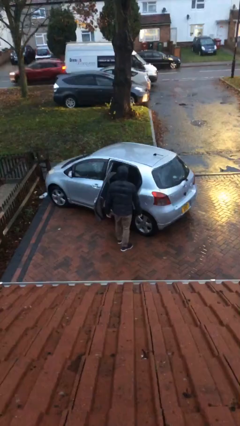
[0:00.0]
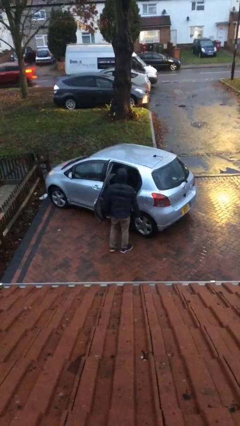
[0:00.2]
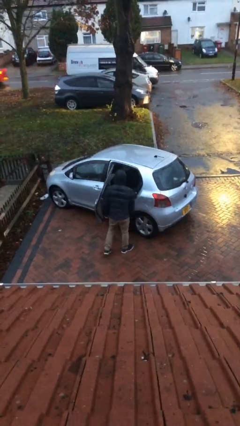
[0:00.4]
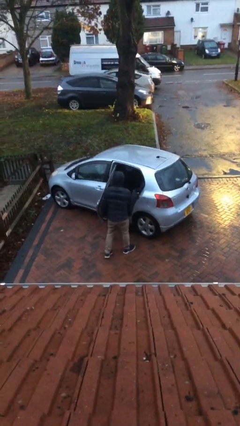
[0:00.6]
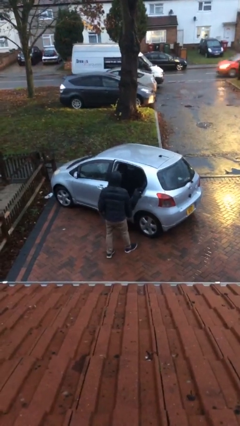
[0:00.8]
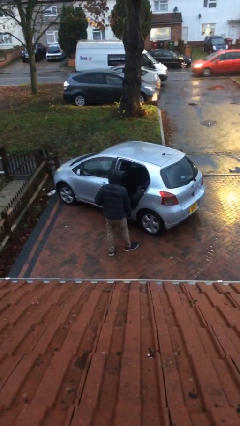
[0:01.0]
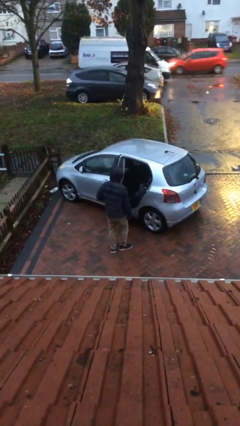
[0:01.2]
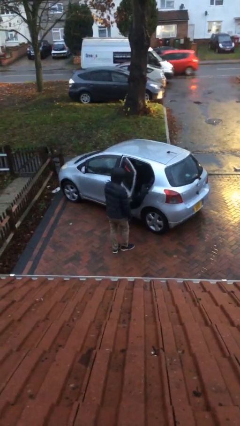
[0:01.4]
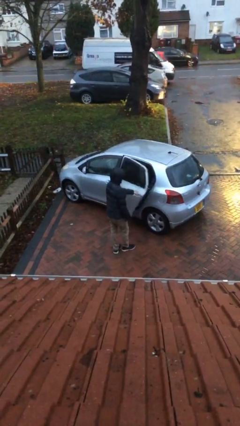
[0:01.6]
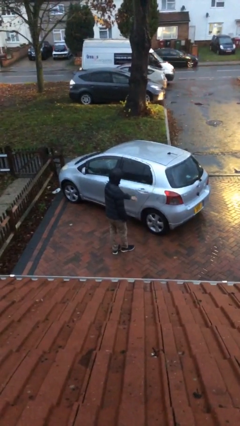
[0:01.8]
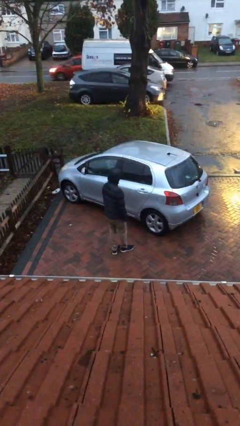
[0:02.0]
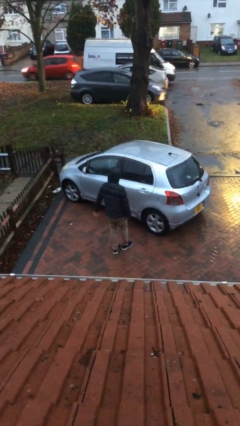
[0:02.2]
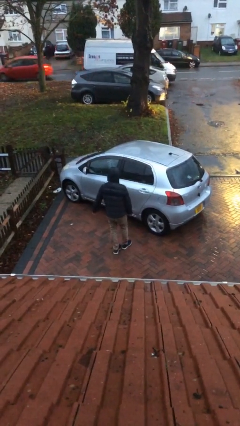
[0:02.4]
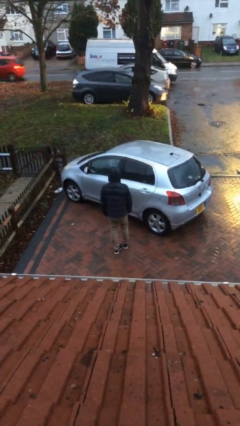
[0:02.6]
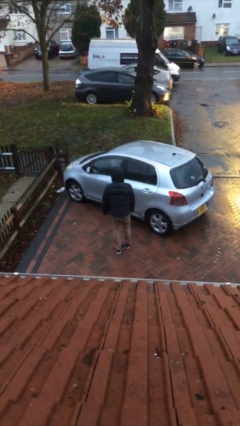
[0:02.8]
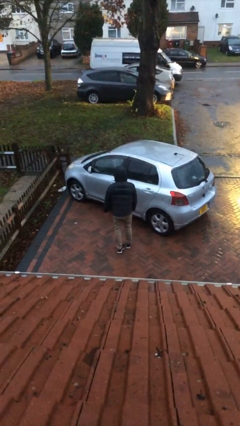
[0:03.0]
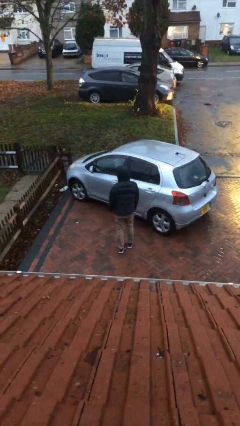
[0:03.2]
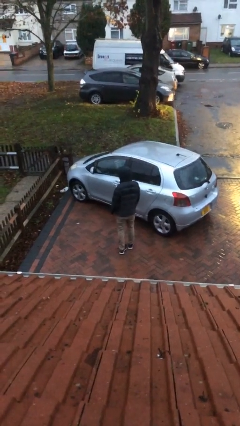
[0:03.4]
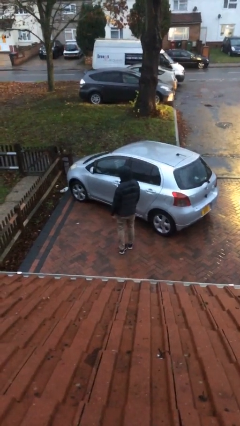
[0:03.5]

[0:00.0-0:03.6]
person closes car door

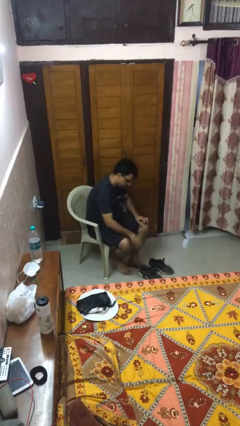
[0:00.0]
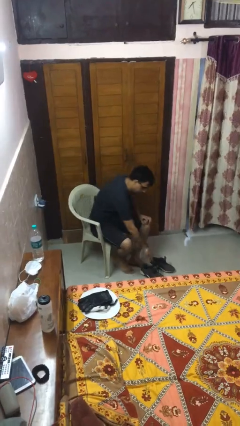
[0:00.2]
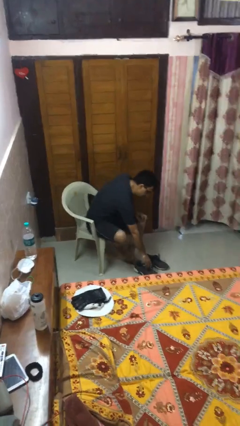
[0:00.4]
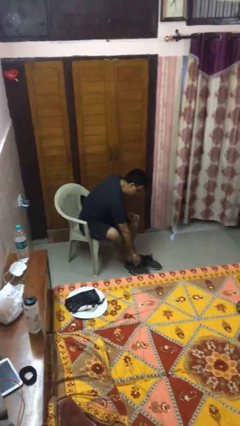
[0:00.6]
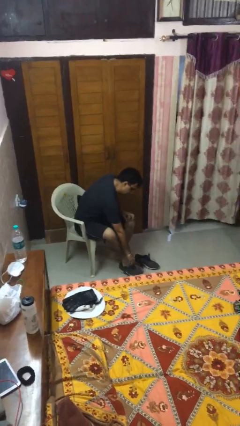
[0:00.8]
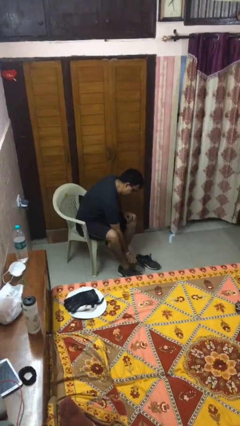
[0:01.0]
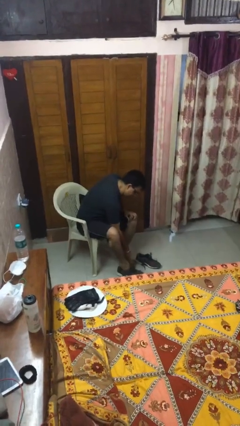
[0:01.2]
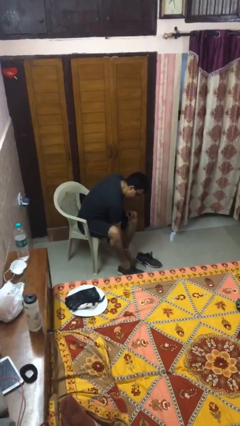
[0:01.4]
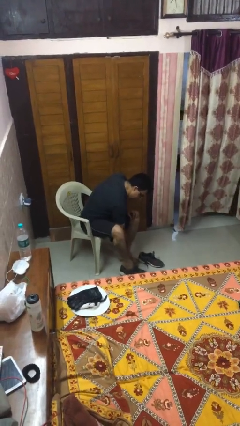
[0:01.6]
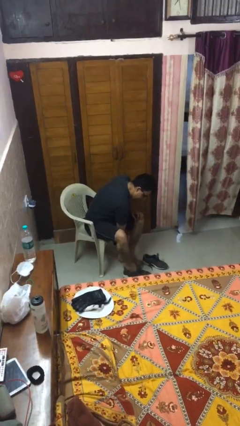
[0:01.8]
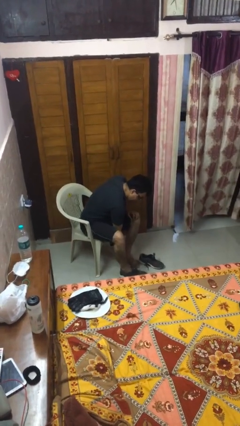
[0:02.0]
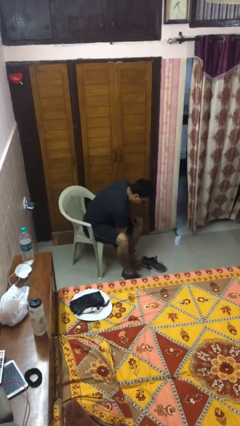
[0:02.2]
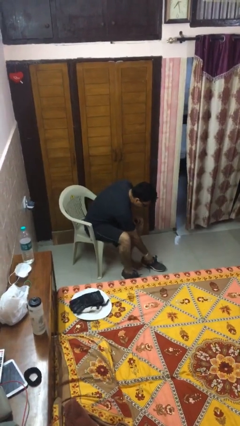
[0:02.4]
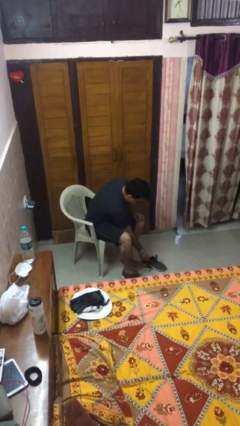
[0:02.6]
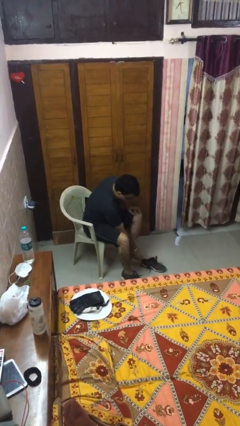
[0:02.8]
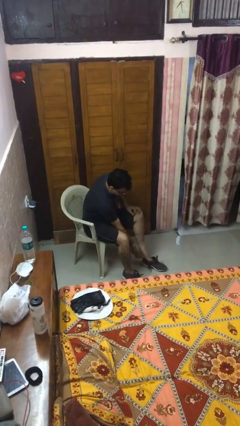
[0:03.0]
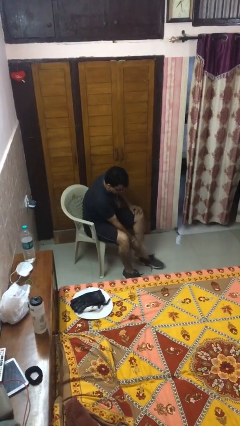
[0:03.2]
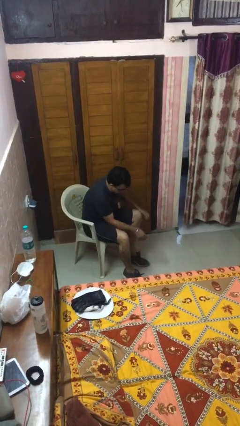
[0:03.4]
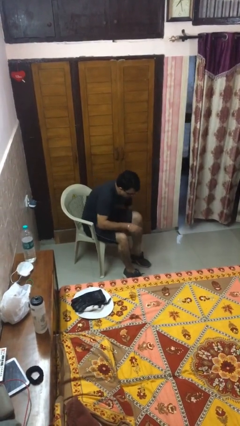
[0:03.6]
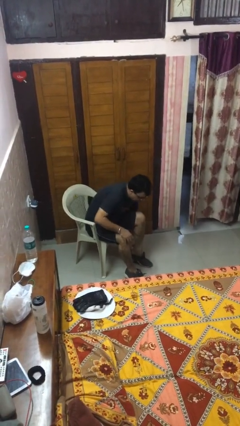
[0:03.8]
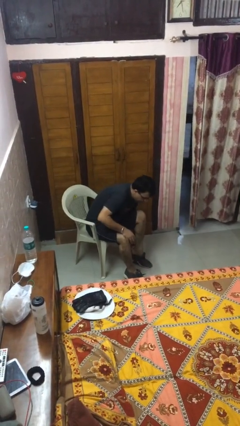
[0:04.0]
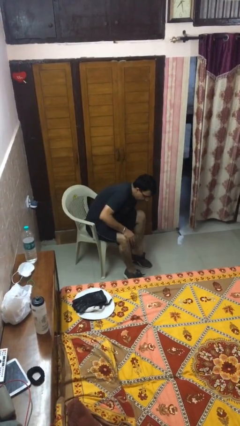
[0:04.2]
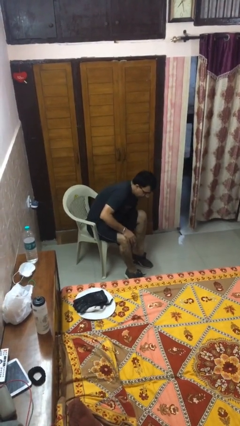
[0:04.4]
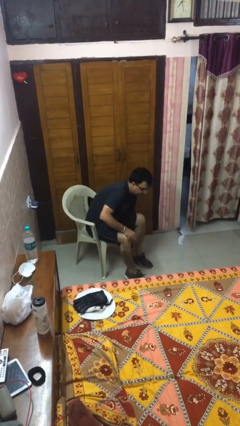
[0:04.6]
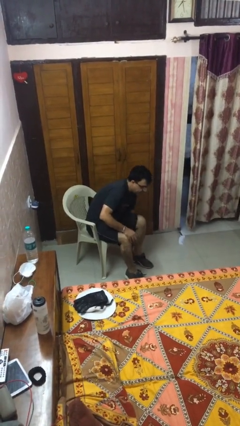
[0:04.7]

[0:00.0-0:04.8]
person puts on shoes

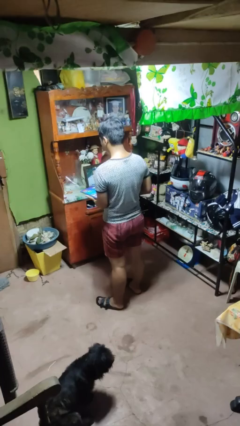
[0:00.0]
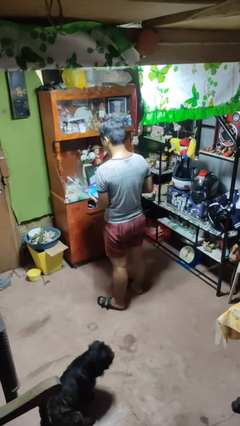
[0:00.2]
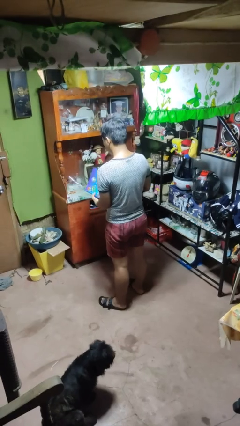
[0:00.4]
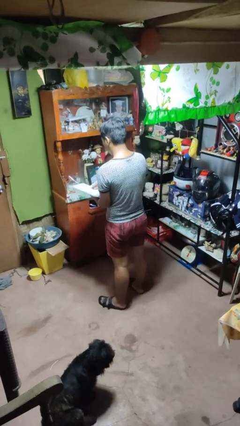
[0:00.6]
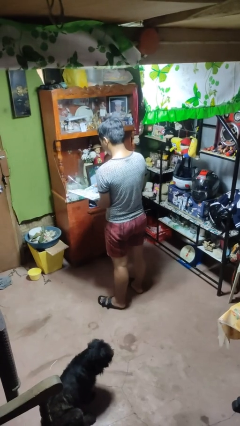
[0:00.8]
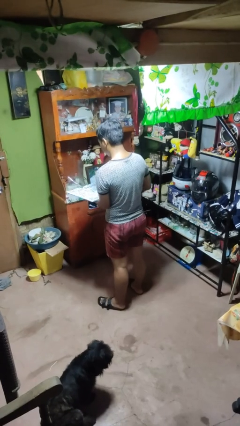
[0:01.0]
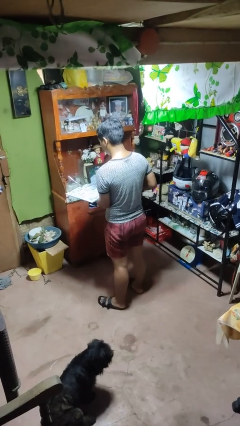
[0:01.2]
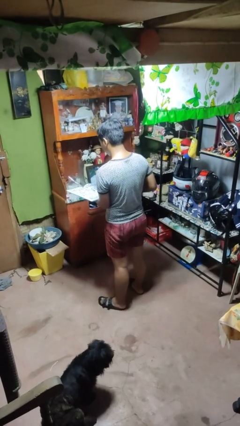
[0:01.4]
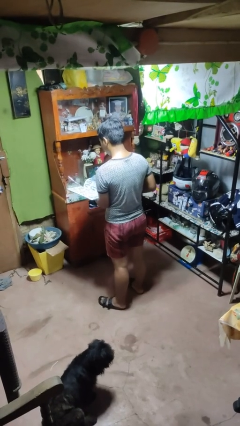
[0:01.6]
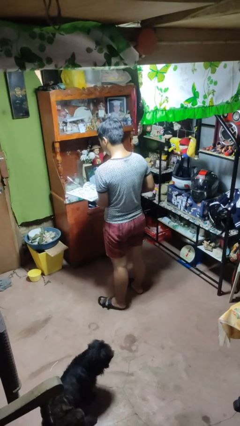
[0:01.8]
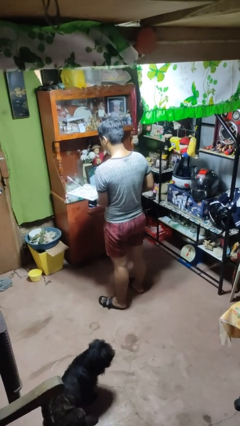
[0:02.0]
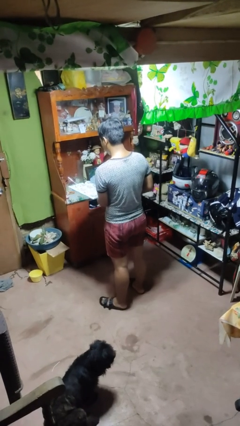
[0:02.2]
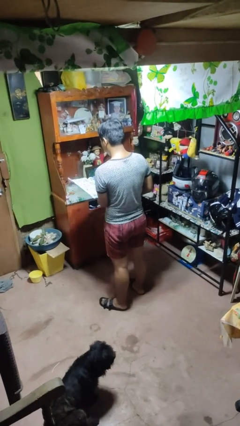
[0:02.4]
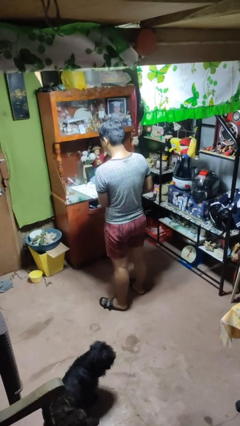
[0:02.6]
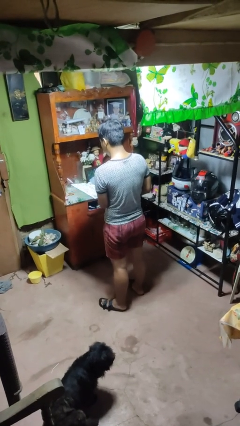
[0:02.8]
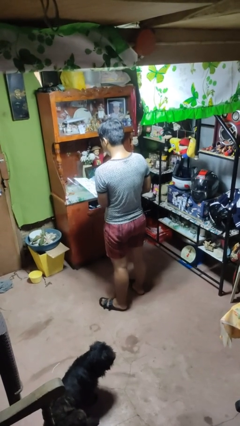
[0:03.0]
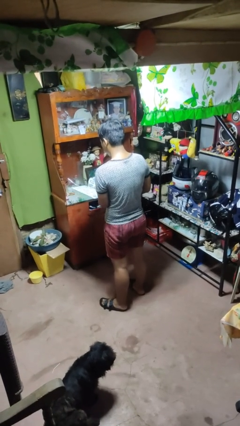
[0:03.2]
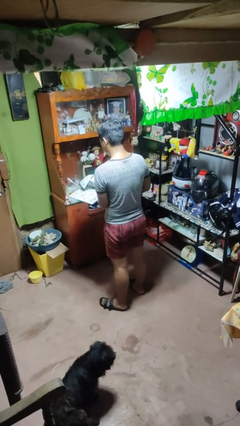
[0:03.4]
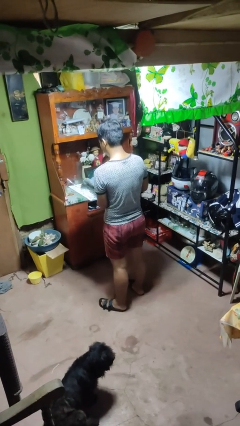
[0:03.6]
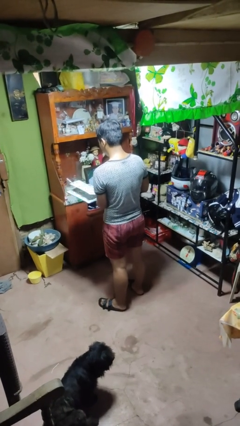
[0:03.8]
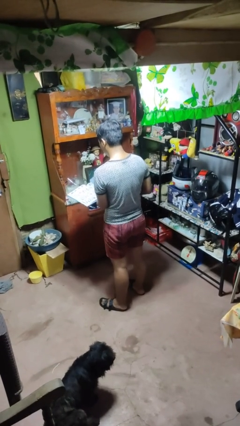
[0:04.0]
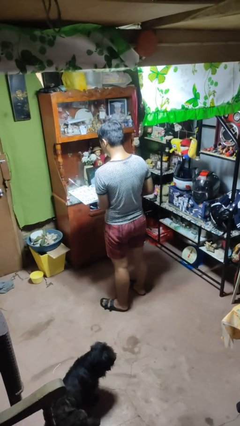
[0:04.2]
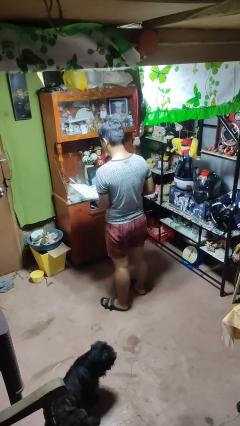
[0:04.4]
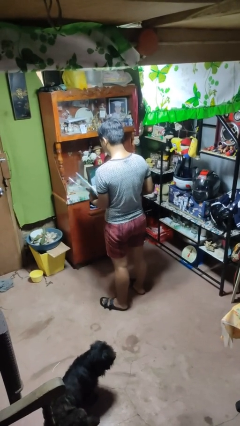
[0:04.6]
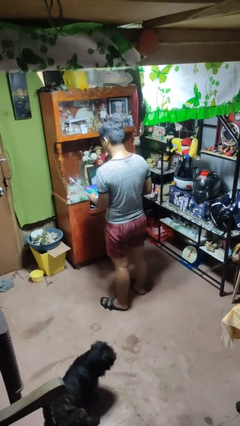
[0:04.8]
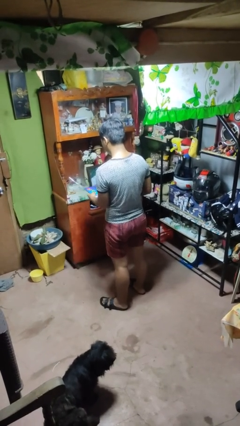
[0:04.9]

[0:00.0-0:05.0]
person reads magazine

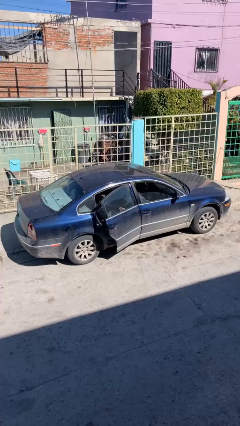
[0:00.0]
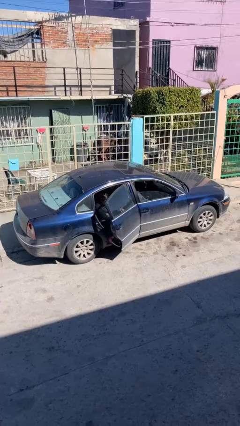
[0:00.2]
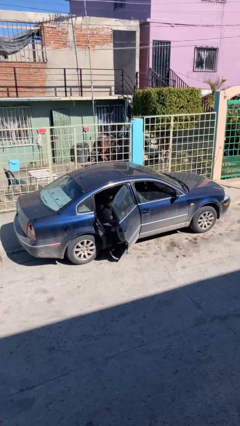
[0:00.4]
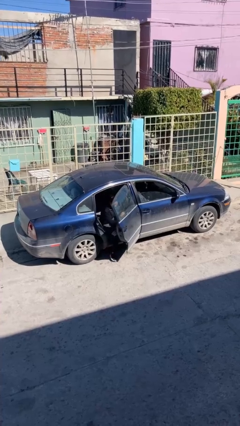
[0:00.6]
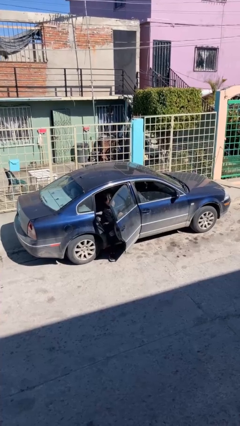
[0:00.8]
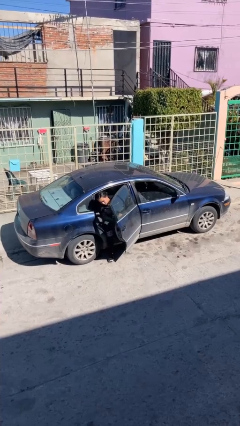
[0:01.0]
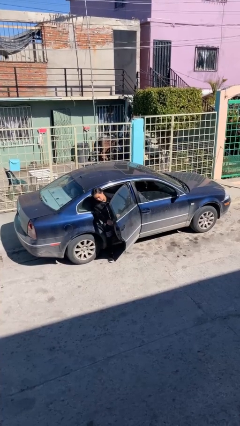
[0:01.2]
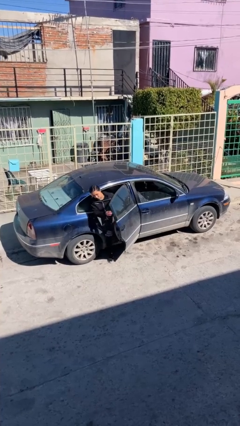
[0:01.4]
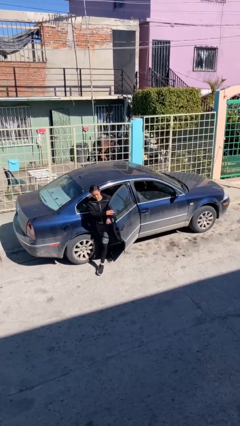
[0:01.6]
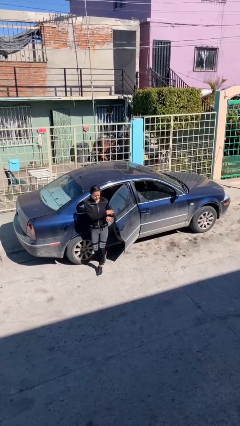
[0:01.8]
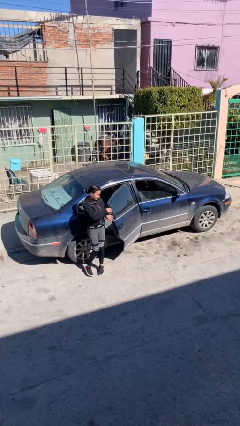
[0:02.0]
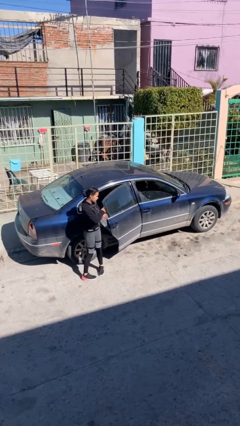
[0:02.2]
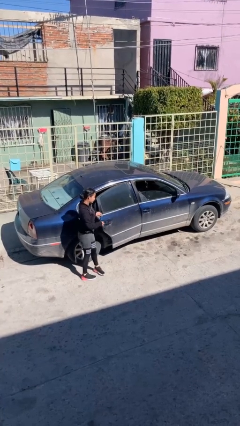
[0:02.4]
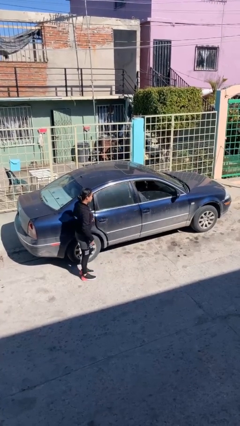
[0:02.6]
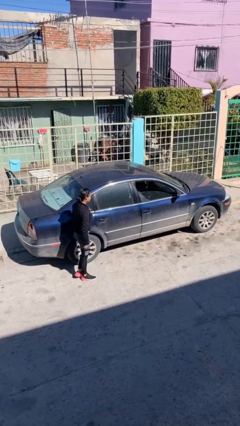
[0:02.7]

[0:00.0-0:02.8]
car drops off person

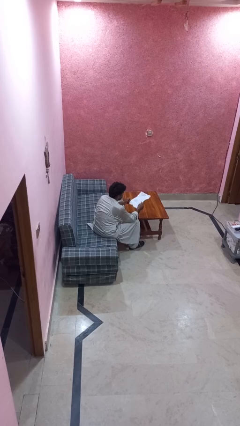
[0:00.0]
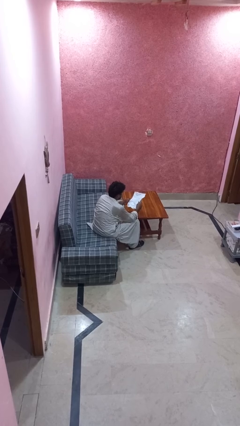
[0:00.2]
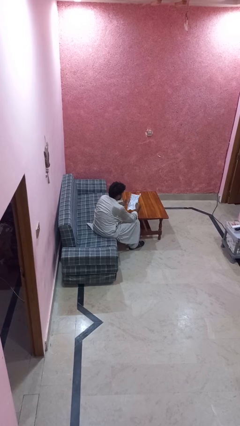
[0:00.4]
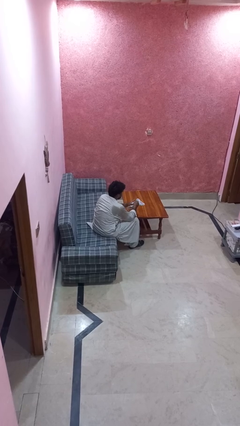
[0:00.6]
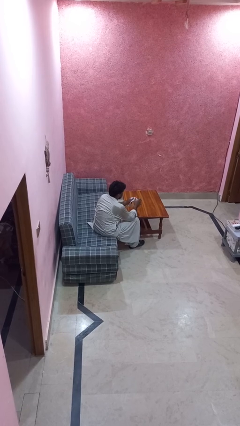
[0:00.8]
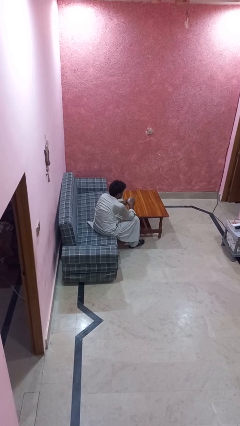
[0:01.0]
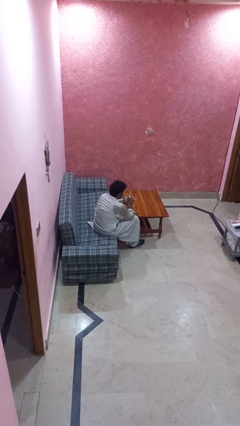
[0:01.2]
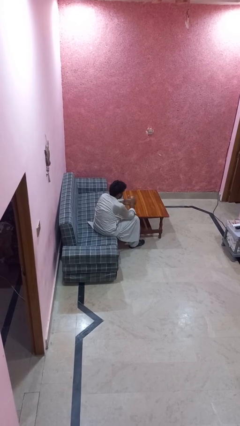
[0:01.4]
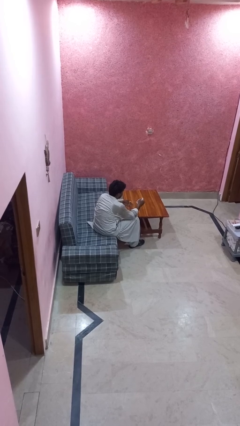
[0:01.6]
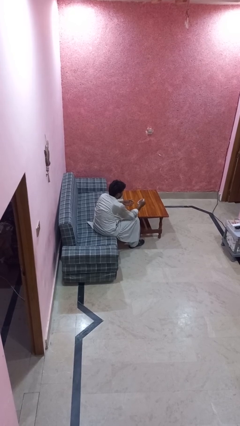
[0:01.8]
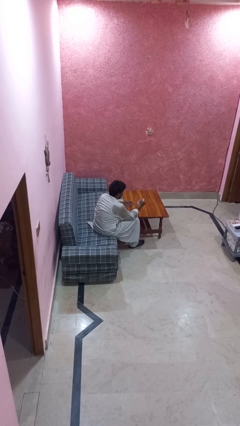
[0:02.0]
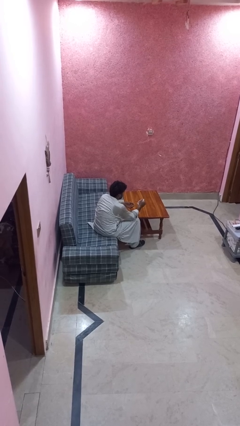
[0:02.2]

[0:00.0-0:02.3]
person crumples paper
